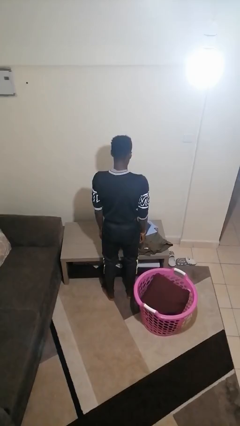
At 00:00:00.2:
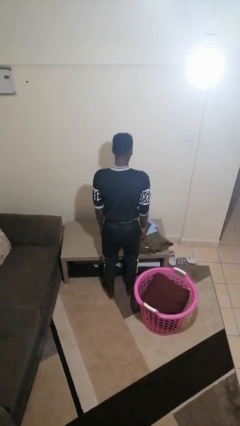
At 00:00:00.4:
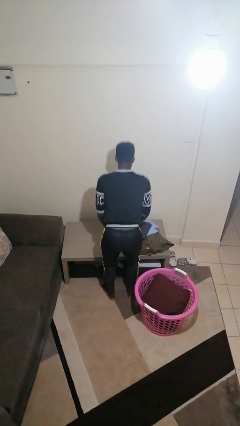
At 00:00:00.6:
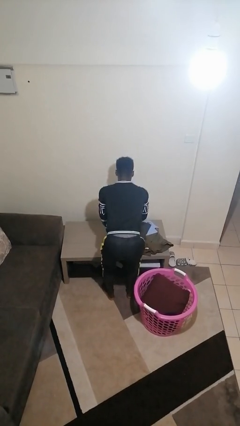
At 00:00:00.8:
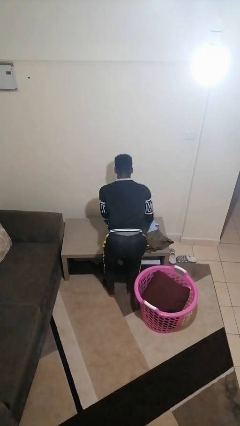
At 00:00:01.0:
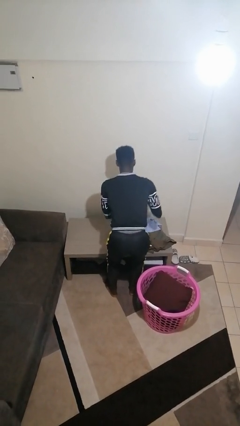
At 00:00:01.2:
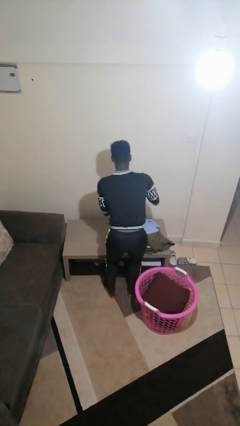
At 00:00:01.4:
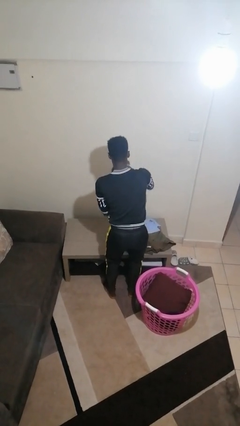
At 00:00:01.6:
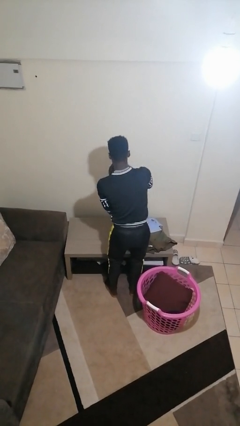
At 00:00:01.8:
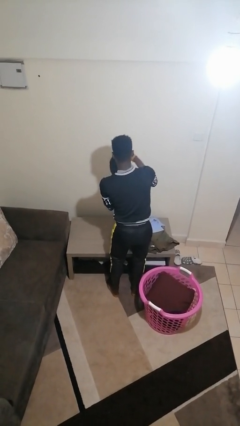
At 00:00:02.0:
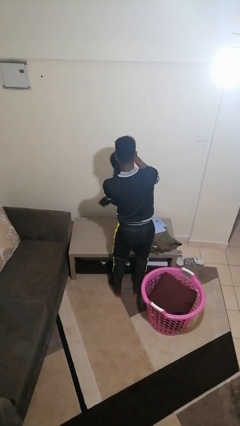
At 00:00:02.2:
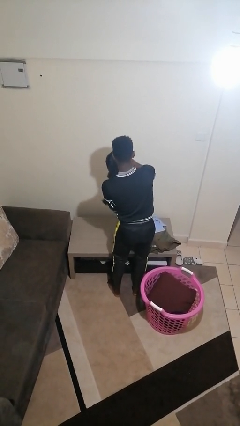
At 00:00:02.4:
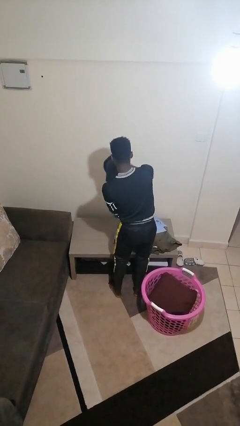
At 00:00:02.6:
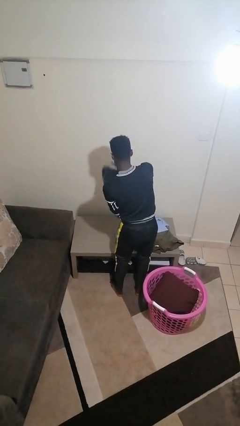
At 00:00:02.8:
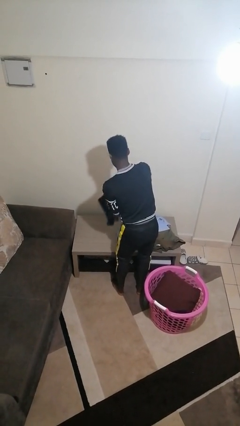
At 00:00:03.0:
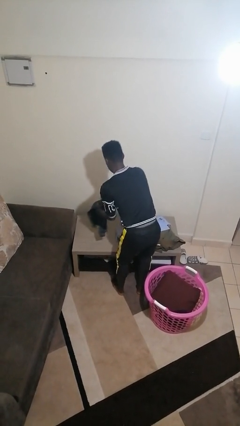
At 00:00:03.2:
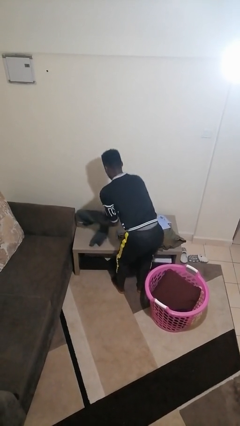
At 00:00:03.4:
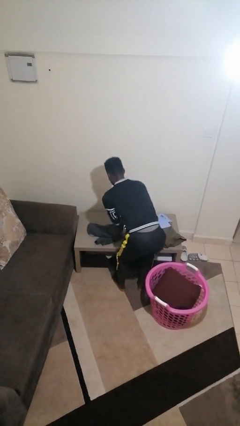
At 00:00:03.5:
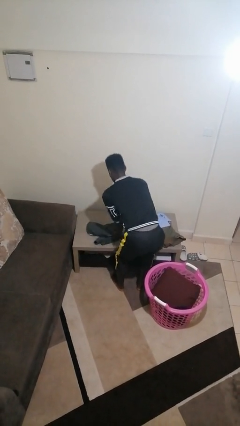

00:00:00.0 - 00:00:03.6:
person folds pants

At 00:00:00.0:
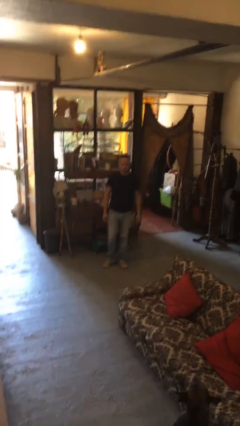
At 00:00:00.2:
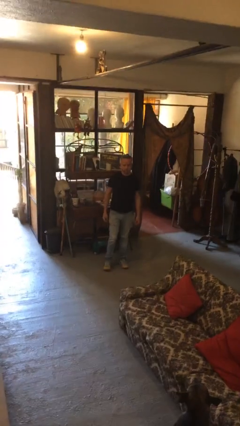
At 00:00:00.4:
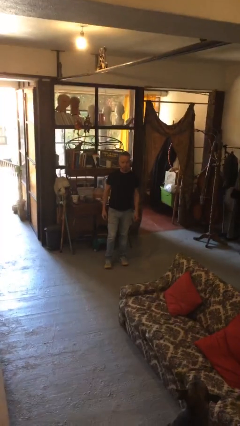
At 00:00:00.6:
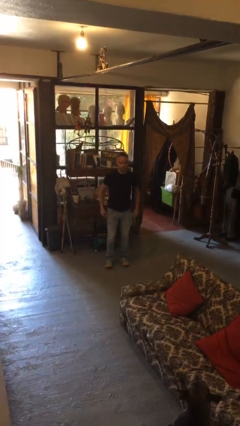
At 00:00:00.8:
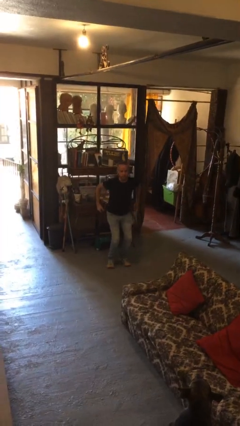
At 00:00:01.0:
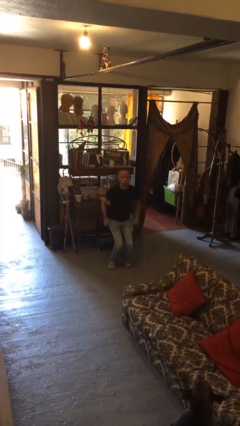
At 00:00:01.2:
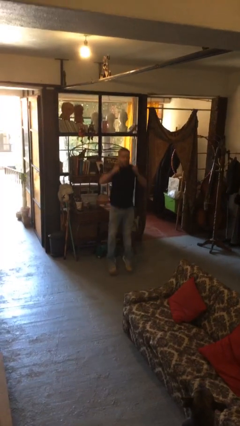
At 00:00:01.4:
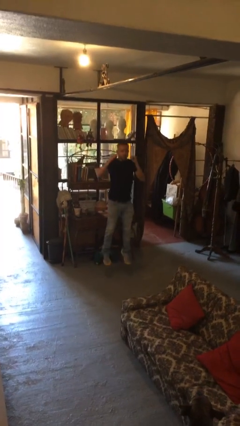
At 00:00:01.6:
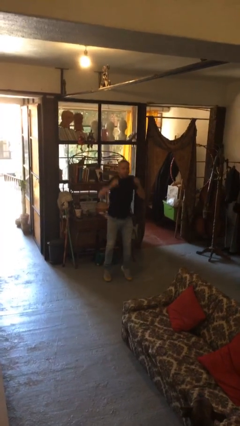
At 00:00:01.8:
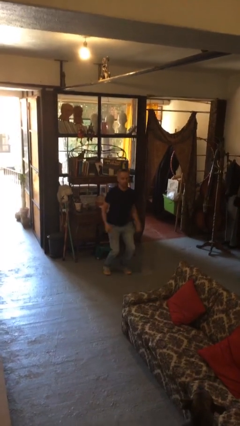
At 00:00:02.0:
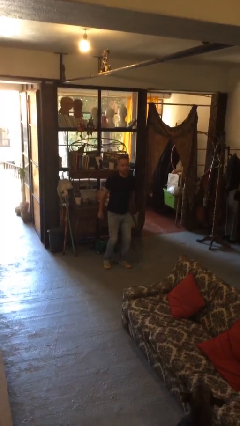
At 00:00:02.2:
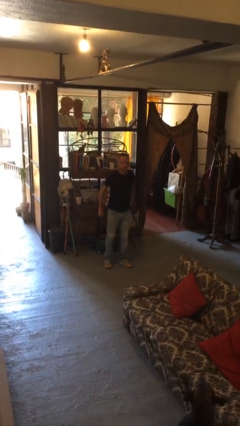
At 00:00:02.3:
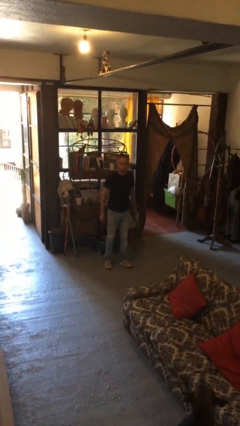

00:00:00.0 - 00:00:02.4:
person jumps

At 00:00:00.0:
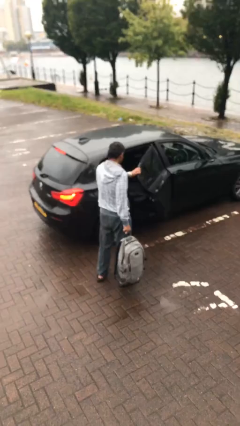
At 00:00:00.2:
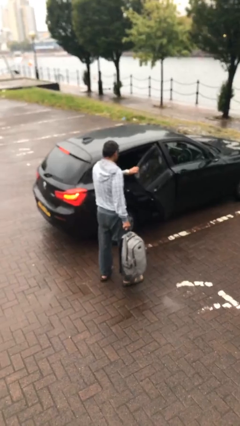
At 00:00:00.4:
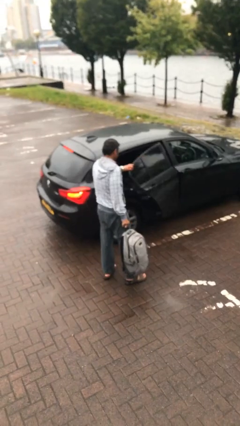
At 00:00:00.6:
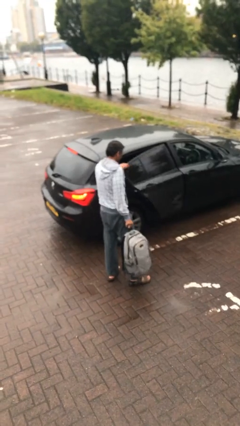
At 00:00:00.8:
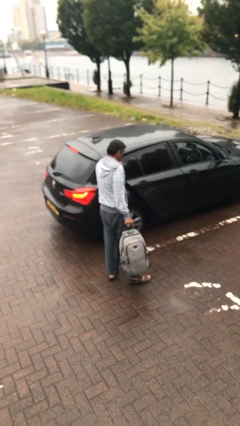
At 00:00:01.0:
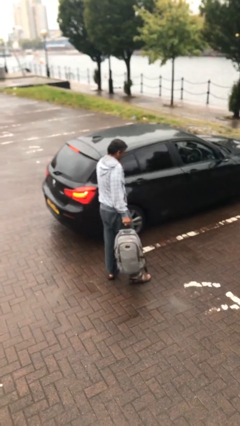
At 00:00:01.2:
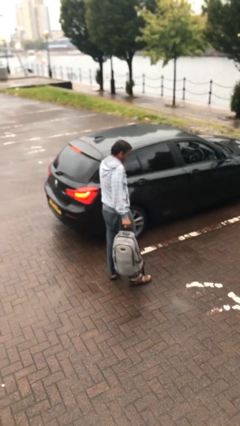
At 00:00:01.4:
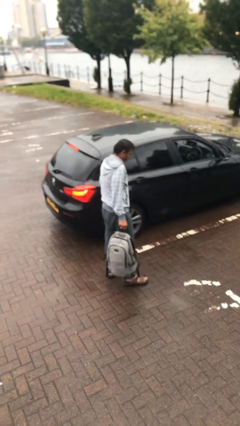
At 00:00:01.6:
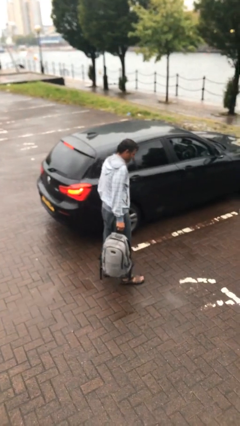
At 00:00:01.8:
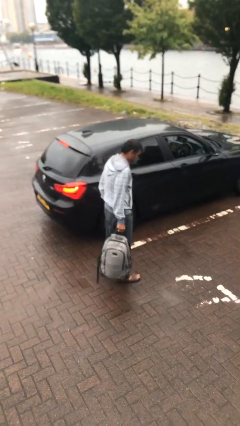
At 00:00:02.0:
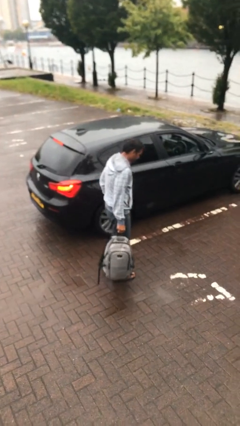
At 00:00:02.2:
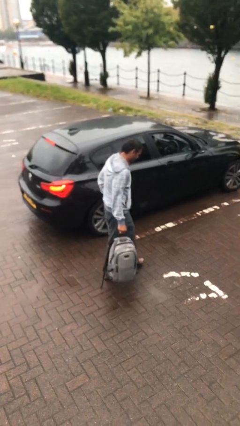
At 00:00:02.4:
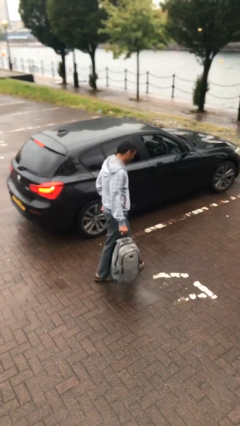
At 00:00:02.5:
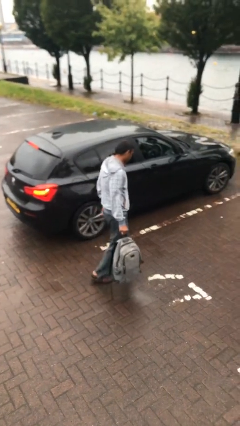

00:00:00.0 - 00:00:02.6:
person closes car door

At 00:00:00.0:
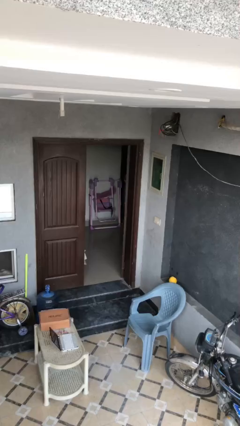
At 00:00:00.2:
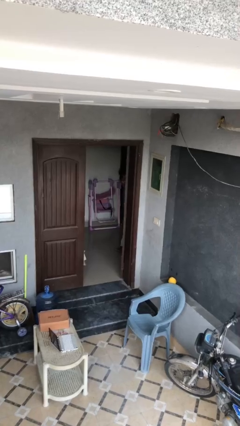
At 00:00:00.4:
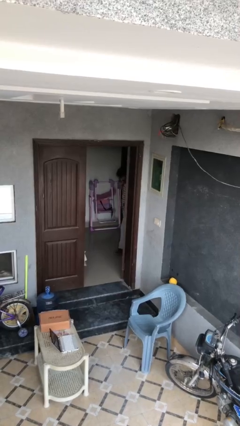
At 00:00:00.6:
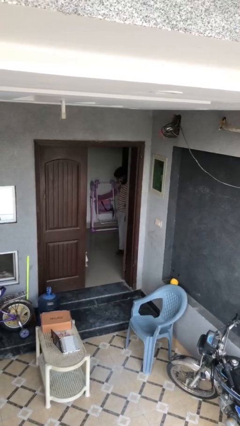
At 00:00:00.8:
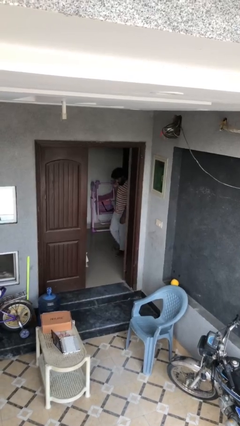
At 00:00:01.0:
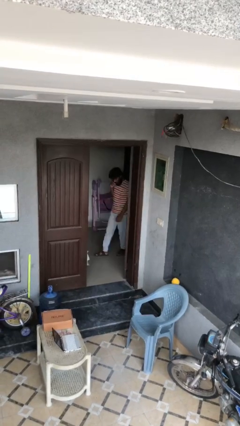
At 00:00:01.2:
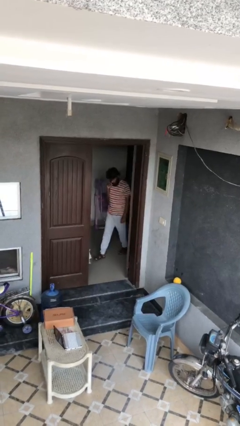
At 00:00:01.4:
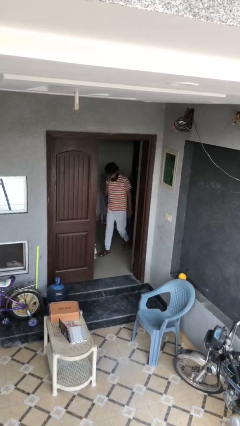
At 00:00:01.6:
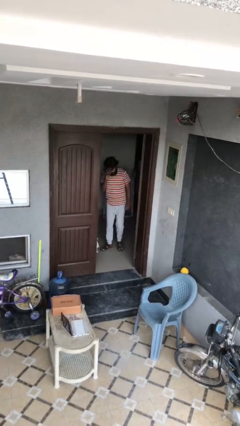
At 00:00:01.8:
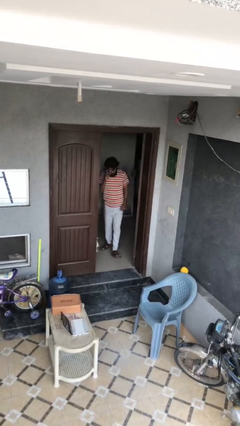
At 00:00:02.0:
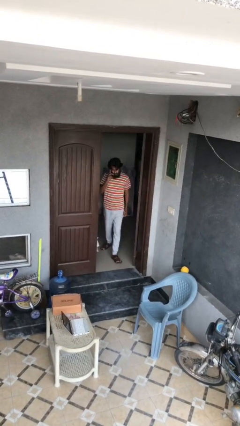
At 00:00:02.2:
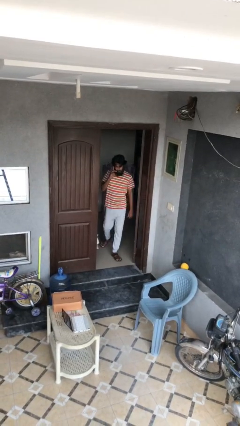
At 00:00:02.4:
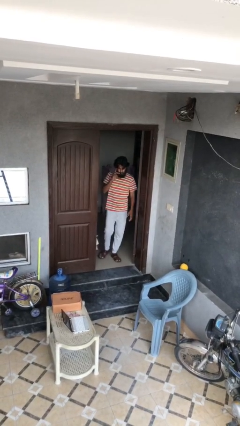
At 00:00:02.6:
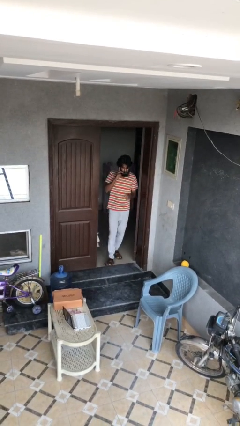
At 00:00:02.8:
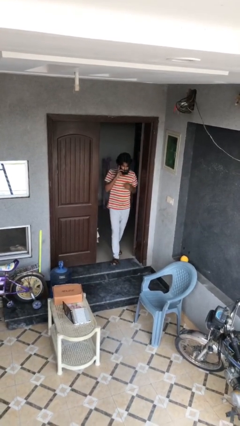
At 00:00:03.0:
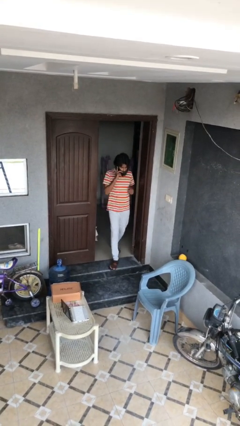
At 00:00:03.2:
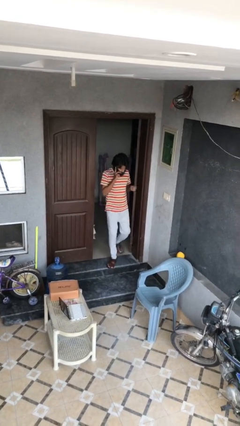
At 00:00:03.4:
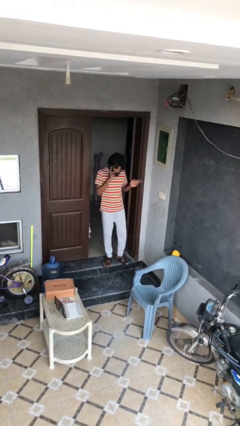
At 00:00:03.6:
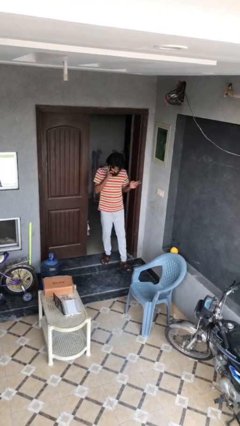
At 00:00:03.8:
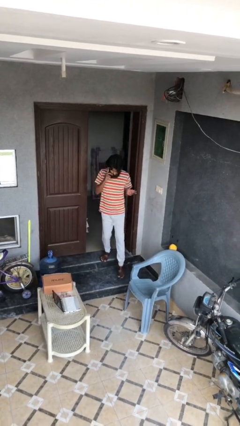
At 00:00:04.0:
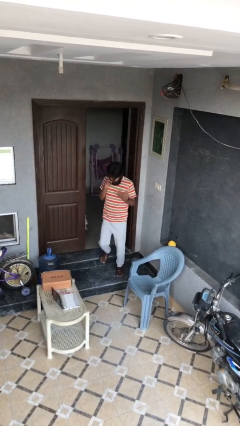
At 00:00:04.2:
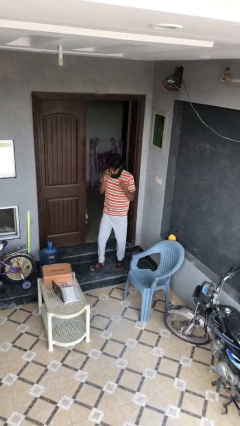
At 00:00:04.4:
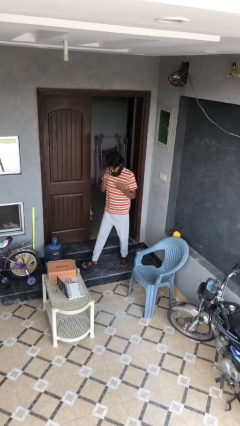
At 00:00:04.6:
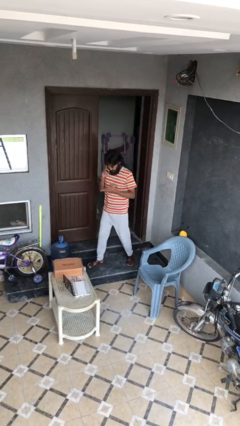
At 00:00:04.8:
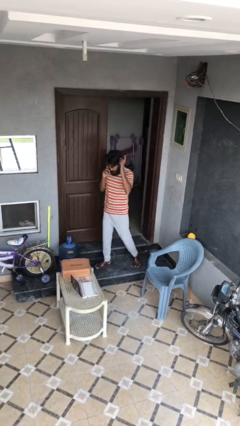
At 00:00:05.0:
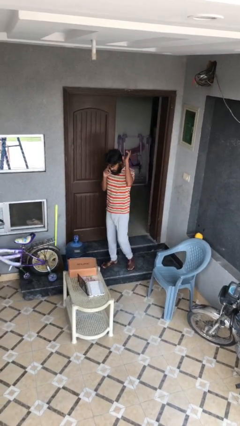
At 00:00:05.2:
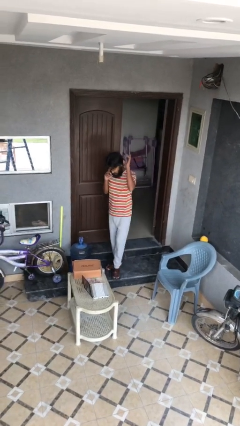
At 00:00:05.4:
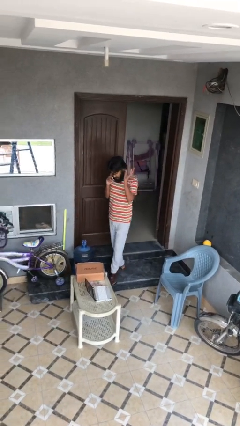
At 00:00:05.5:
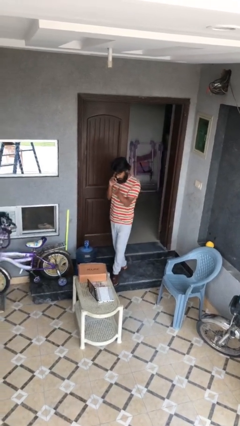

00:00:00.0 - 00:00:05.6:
person enters scene through structure

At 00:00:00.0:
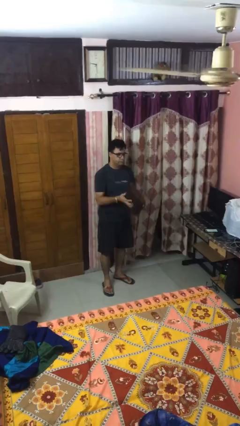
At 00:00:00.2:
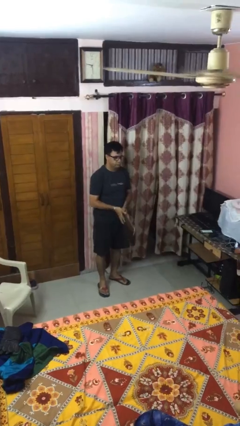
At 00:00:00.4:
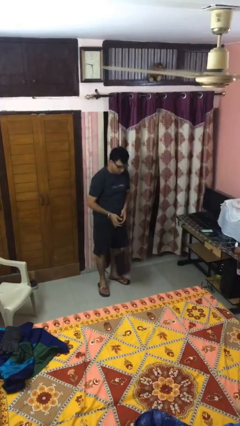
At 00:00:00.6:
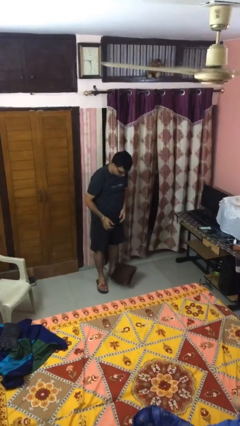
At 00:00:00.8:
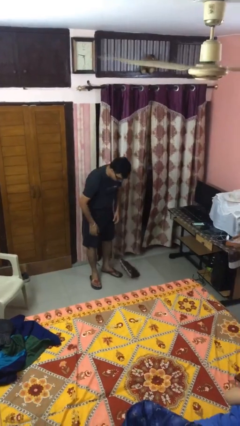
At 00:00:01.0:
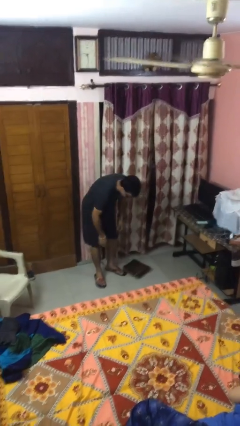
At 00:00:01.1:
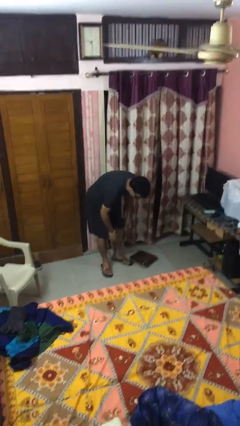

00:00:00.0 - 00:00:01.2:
person drops object

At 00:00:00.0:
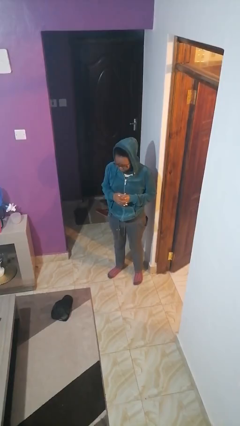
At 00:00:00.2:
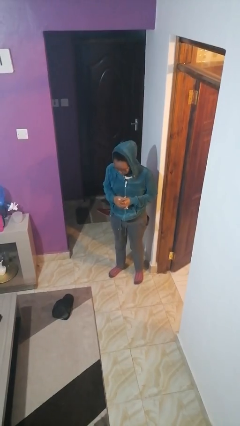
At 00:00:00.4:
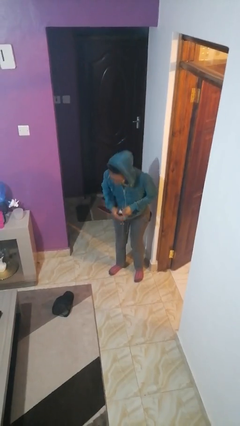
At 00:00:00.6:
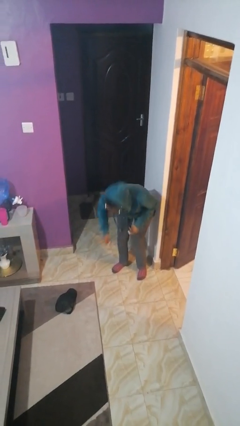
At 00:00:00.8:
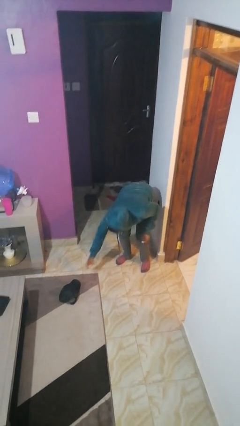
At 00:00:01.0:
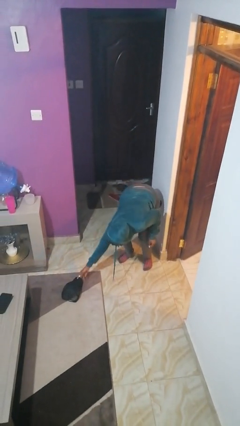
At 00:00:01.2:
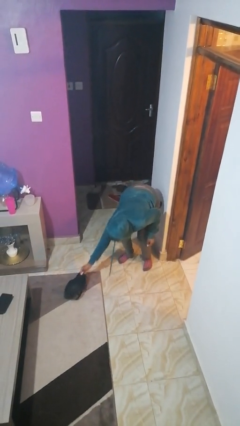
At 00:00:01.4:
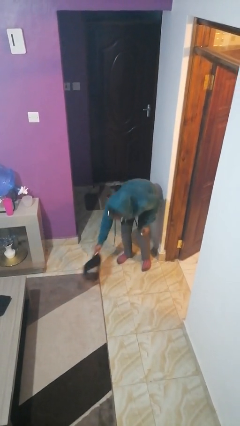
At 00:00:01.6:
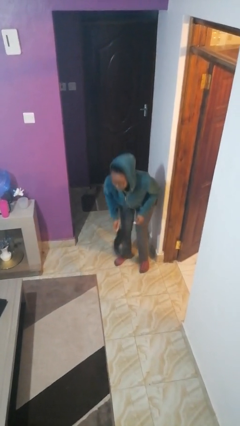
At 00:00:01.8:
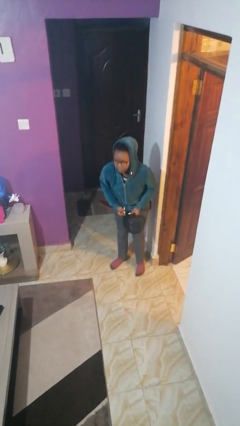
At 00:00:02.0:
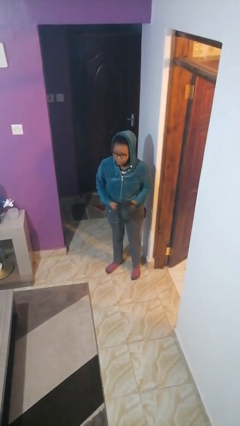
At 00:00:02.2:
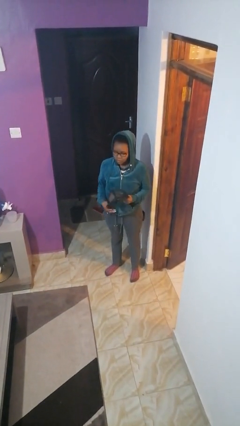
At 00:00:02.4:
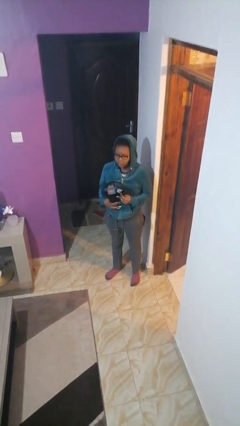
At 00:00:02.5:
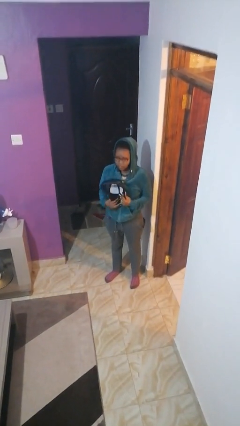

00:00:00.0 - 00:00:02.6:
person picks up object from floor
